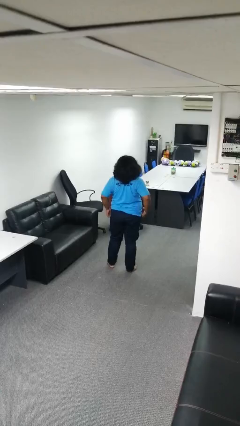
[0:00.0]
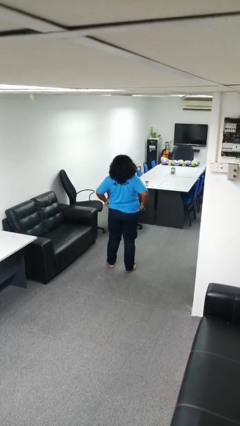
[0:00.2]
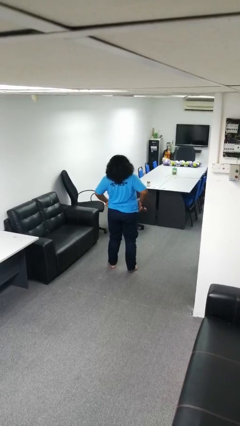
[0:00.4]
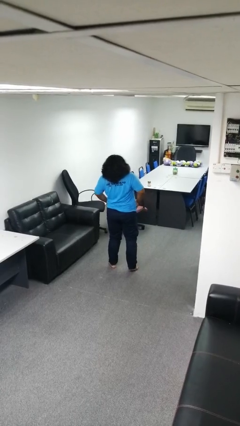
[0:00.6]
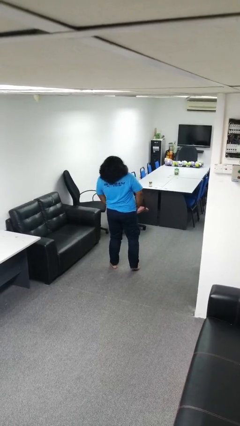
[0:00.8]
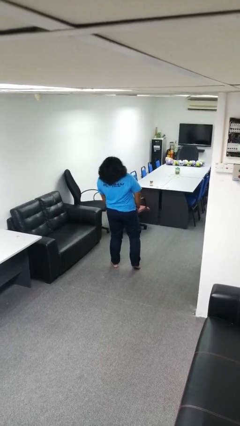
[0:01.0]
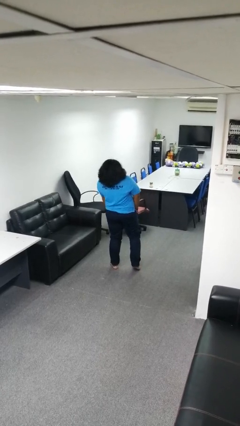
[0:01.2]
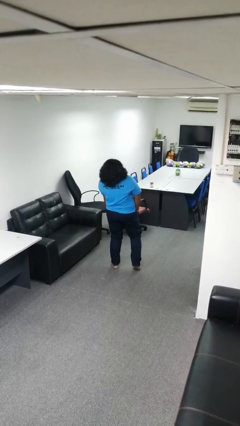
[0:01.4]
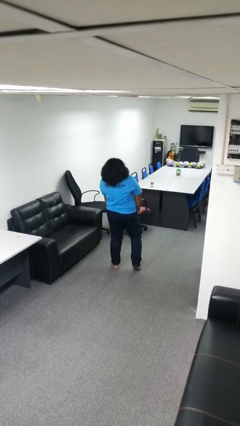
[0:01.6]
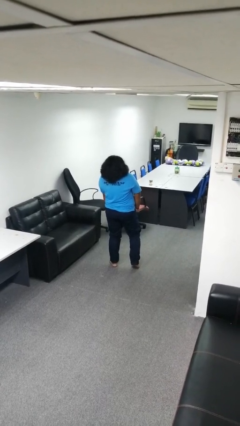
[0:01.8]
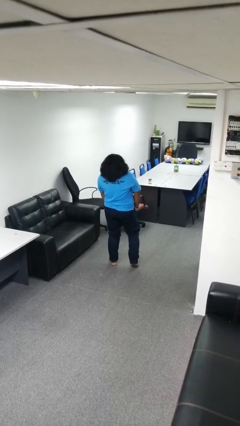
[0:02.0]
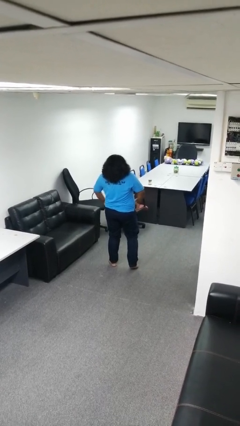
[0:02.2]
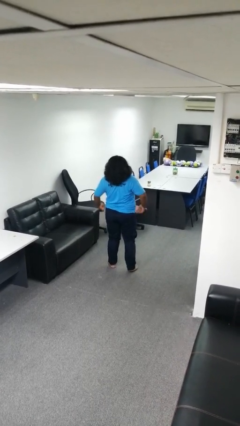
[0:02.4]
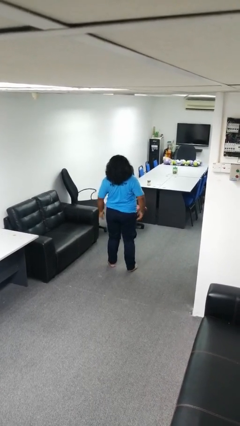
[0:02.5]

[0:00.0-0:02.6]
person puts hands in back pockets

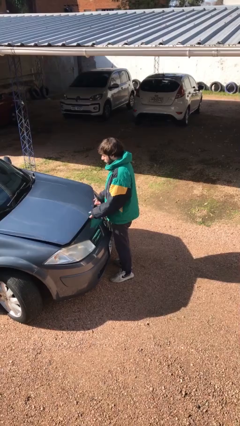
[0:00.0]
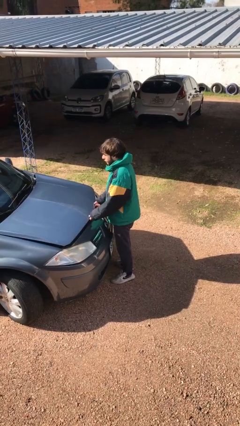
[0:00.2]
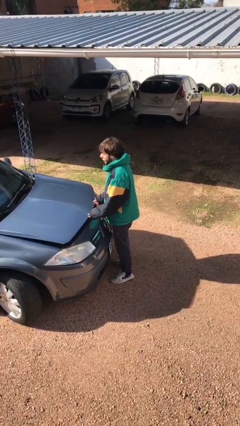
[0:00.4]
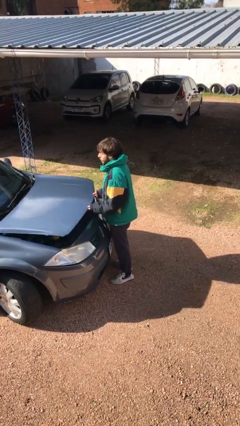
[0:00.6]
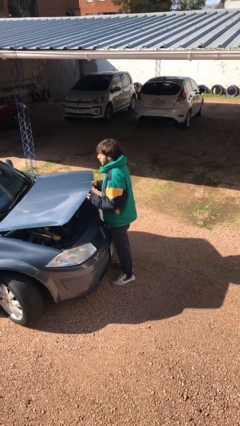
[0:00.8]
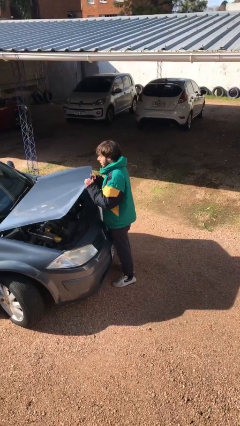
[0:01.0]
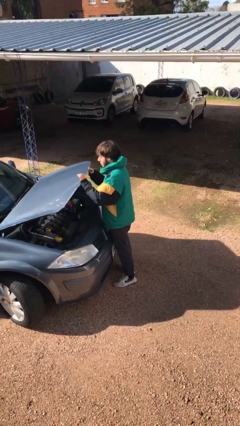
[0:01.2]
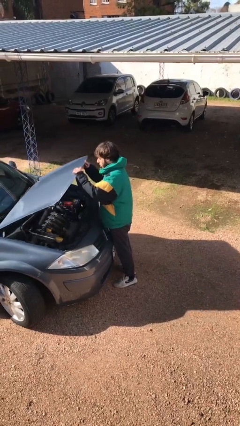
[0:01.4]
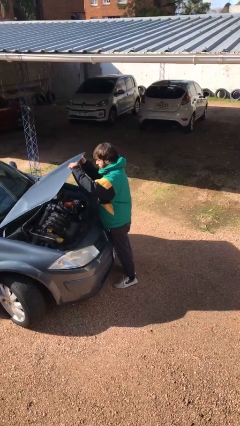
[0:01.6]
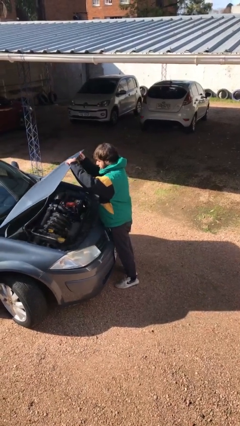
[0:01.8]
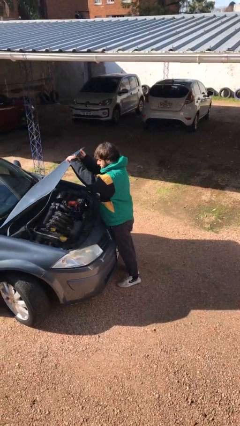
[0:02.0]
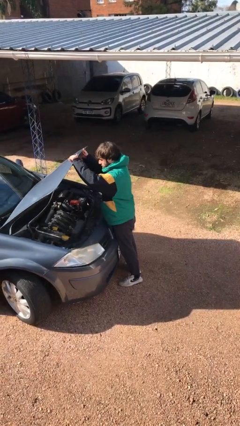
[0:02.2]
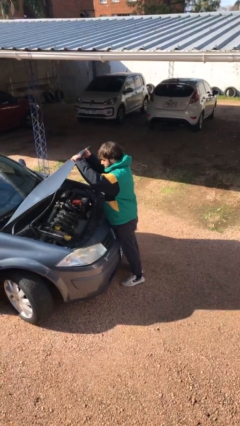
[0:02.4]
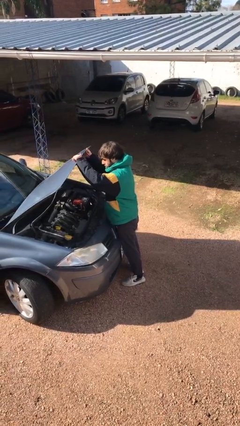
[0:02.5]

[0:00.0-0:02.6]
person opens car hood

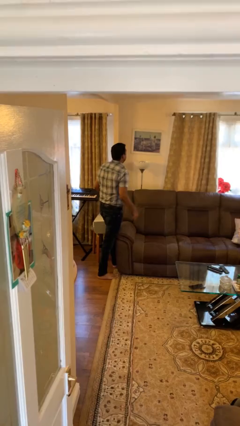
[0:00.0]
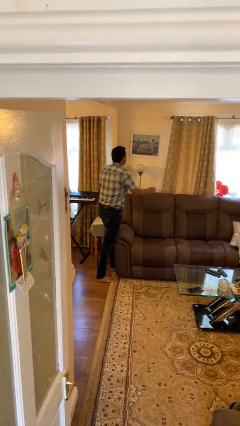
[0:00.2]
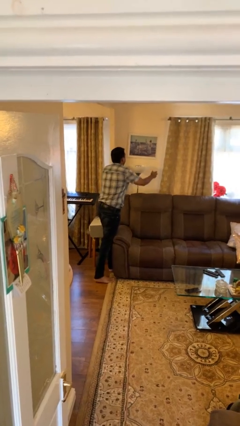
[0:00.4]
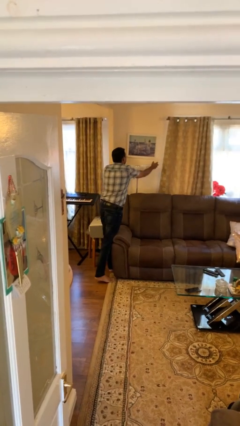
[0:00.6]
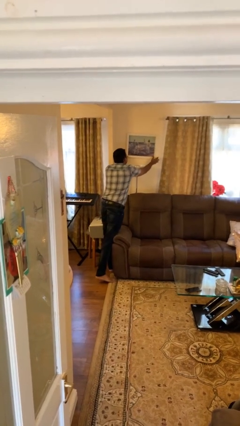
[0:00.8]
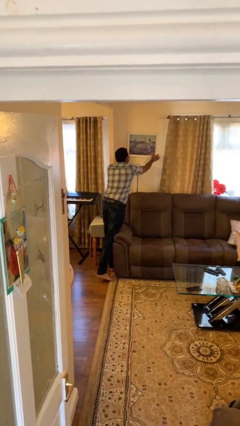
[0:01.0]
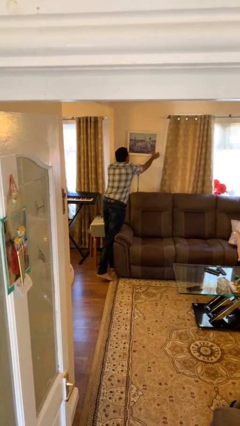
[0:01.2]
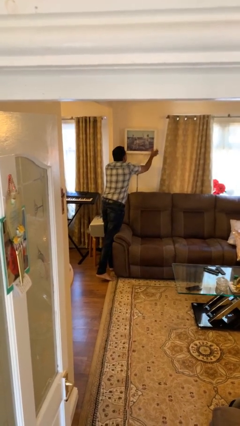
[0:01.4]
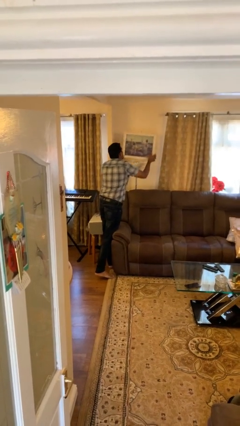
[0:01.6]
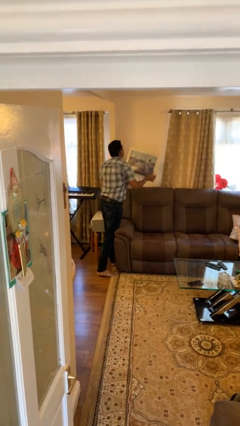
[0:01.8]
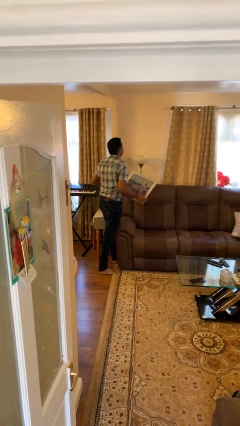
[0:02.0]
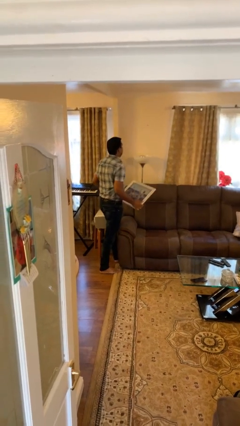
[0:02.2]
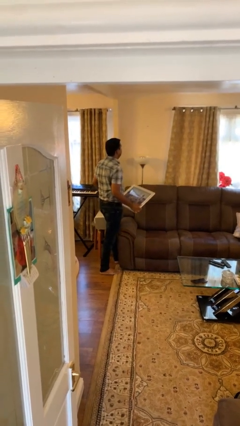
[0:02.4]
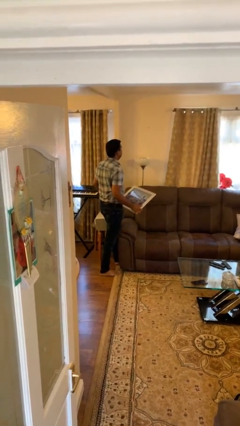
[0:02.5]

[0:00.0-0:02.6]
person takes down picture frame

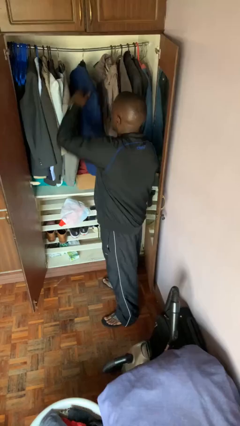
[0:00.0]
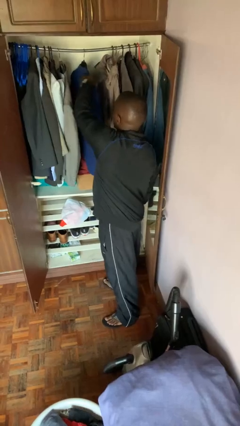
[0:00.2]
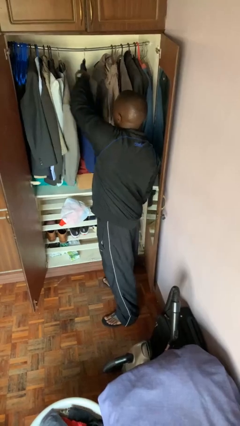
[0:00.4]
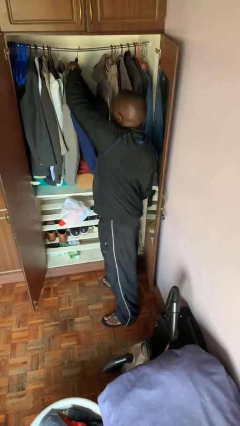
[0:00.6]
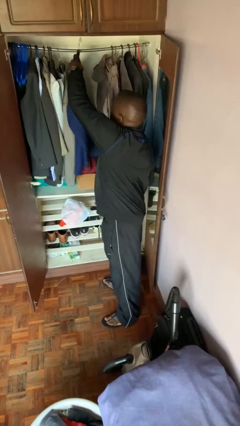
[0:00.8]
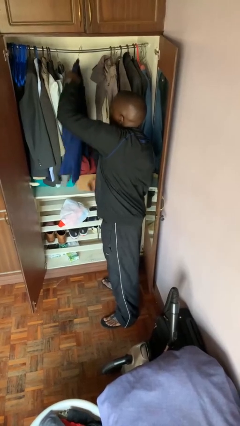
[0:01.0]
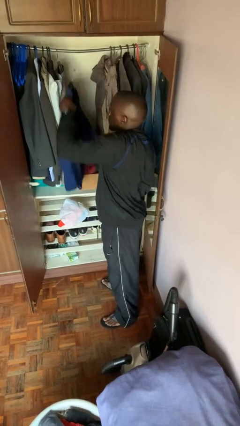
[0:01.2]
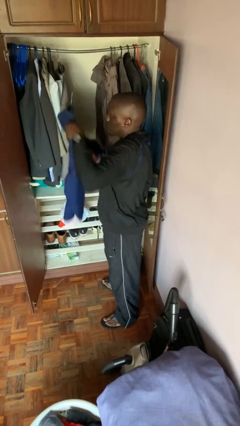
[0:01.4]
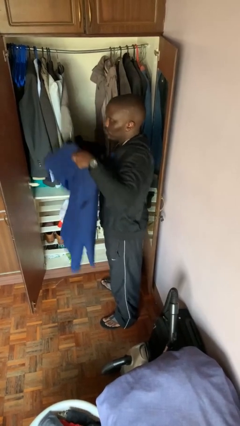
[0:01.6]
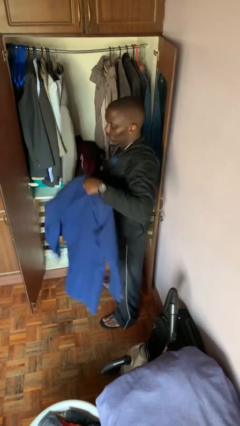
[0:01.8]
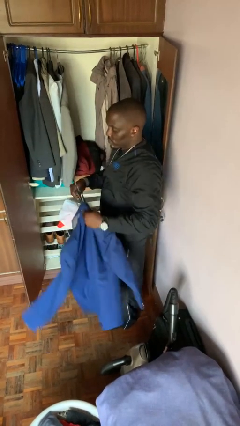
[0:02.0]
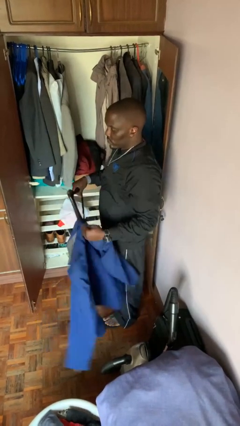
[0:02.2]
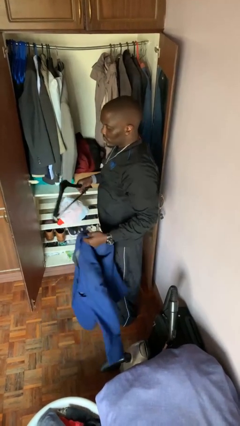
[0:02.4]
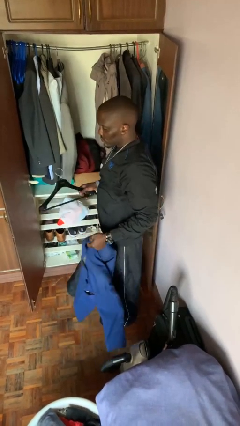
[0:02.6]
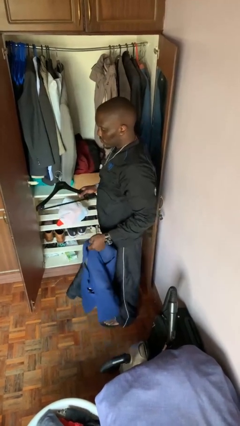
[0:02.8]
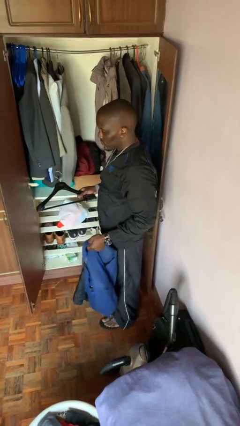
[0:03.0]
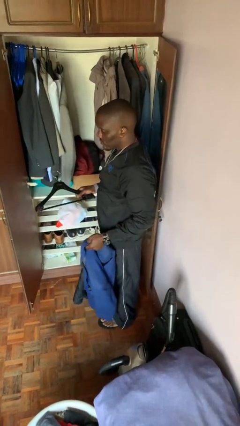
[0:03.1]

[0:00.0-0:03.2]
person takes clothes from closet

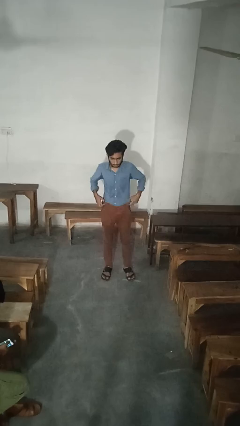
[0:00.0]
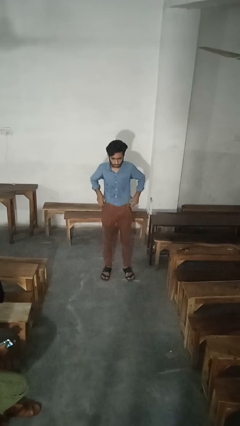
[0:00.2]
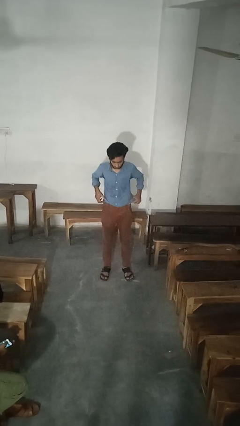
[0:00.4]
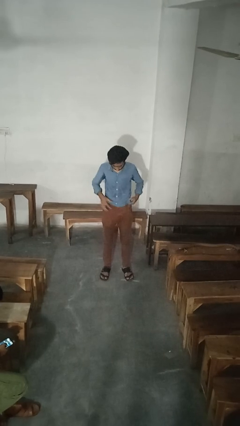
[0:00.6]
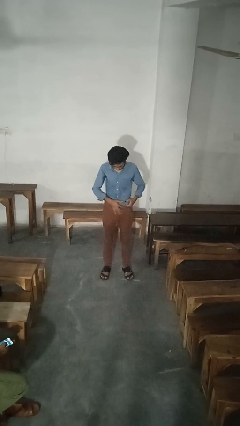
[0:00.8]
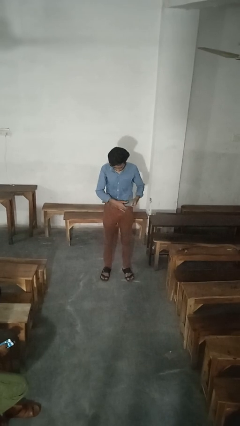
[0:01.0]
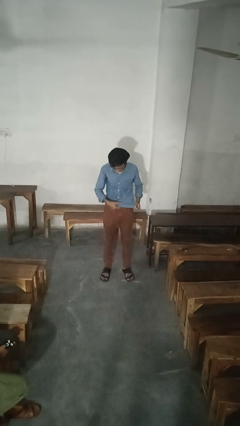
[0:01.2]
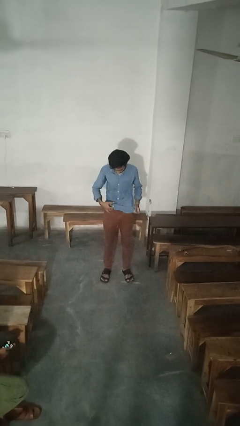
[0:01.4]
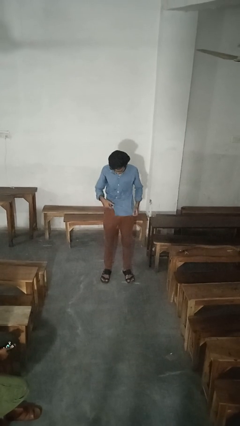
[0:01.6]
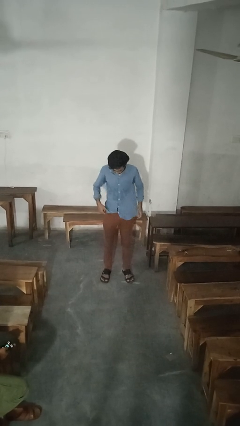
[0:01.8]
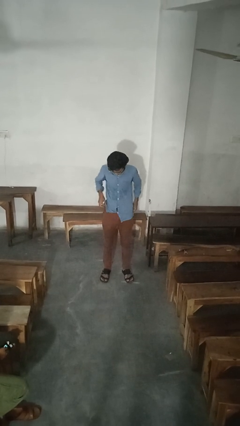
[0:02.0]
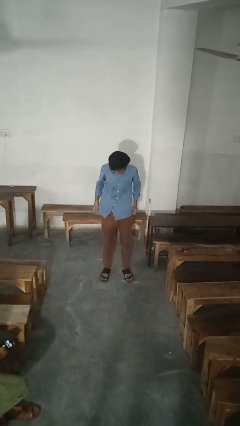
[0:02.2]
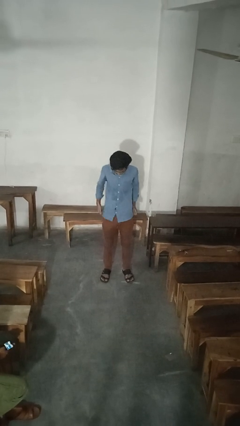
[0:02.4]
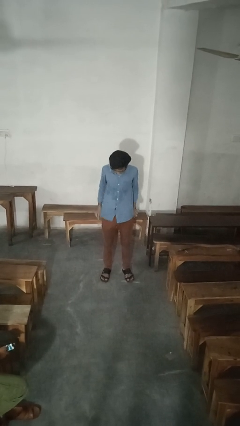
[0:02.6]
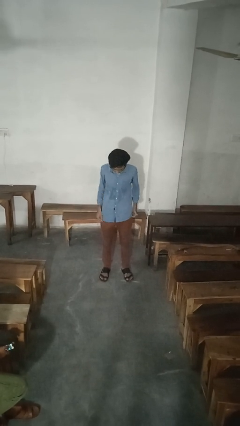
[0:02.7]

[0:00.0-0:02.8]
person untucks shirt

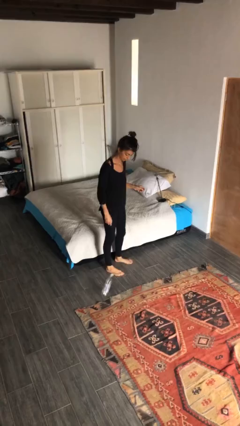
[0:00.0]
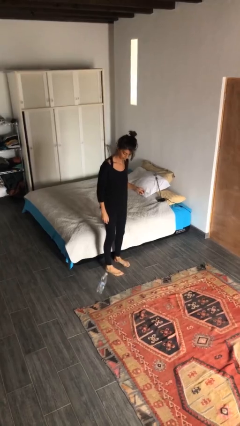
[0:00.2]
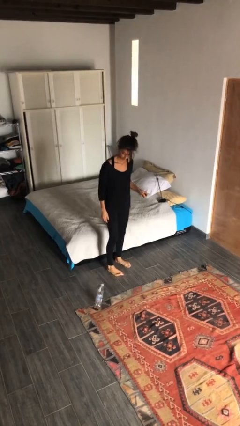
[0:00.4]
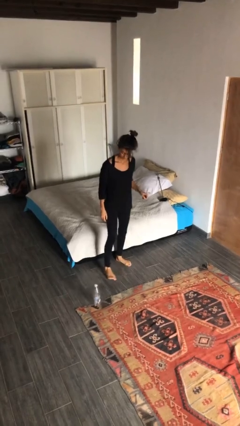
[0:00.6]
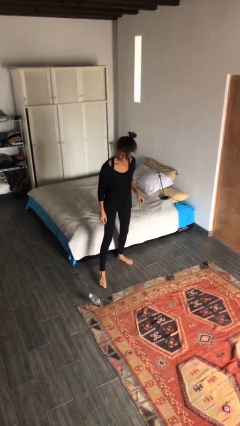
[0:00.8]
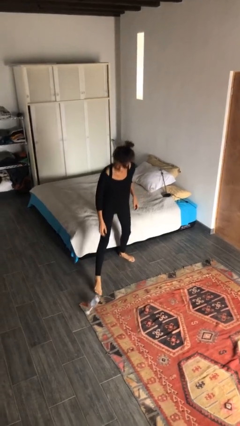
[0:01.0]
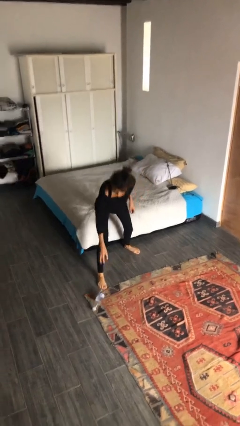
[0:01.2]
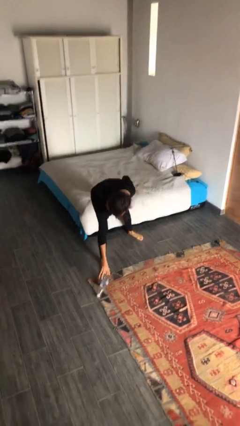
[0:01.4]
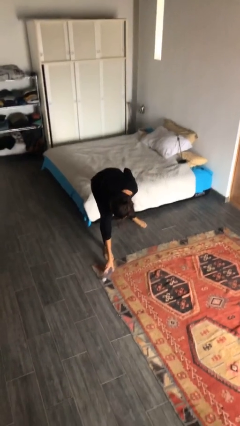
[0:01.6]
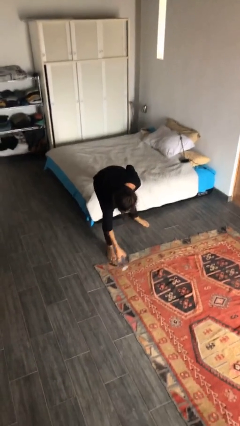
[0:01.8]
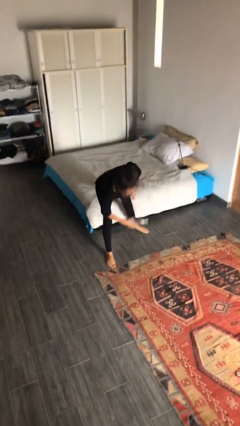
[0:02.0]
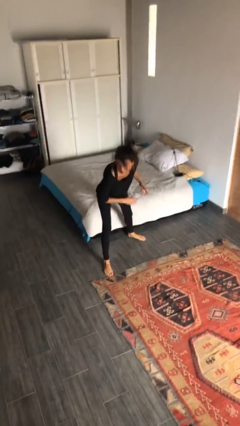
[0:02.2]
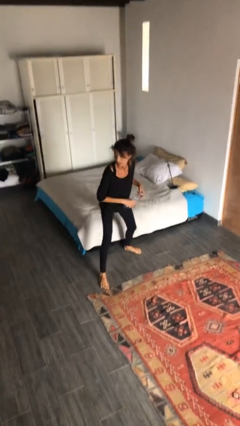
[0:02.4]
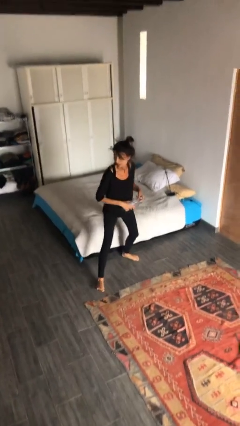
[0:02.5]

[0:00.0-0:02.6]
person picks up object from floor

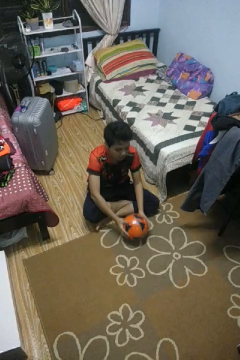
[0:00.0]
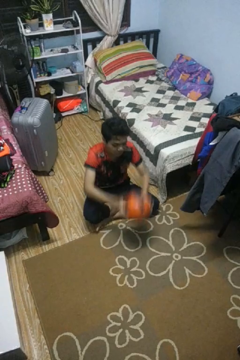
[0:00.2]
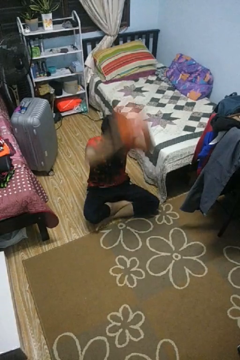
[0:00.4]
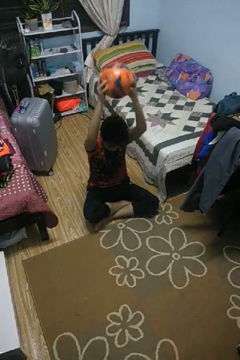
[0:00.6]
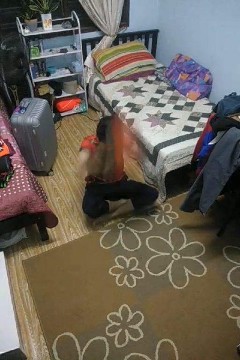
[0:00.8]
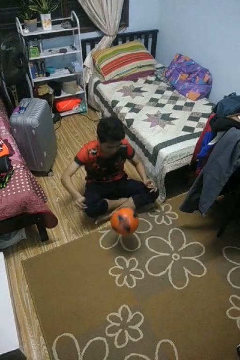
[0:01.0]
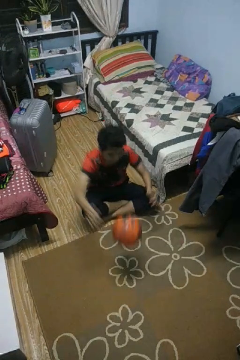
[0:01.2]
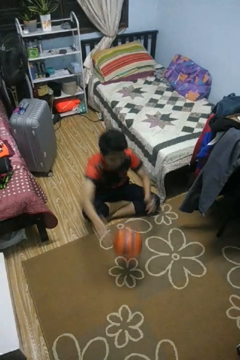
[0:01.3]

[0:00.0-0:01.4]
person bounces ball on floor
